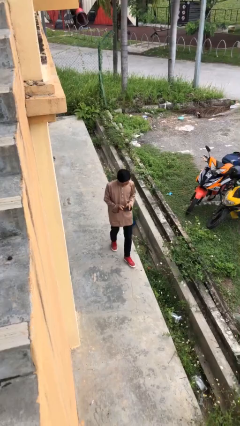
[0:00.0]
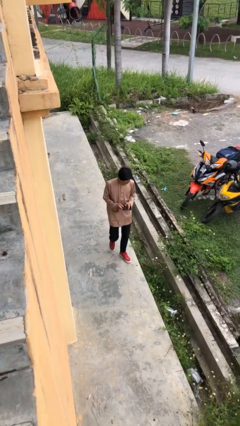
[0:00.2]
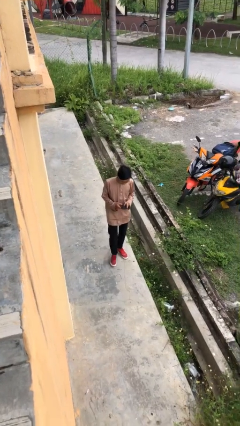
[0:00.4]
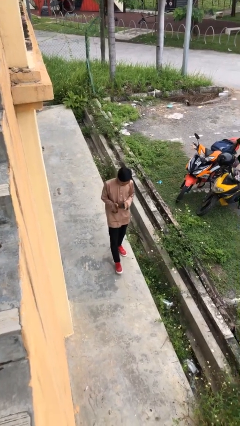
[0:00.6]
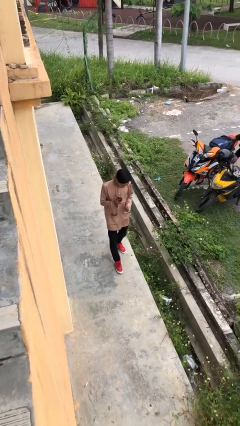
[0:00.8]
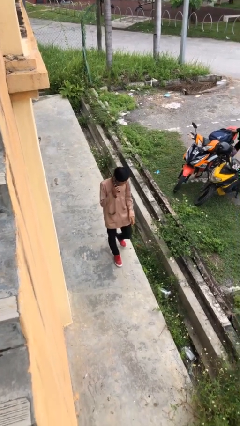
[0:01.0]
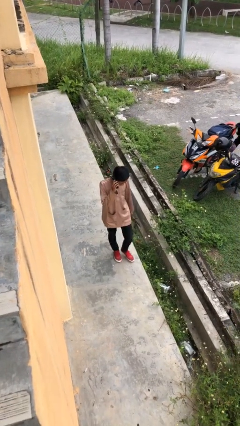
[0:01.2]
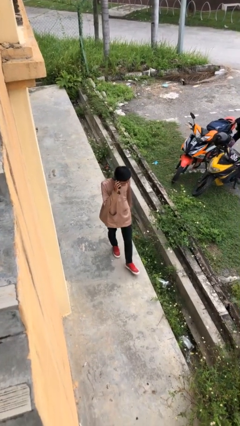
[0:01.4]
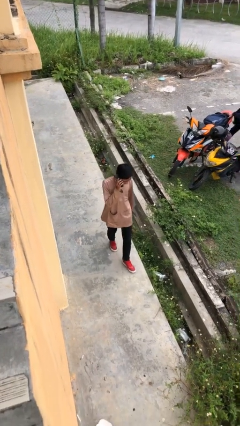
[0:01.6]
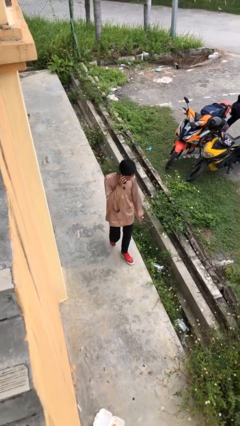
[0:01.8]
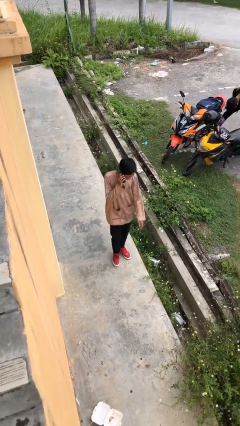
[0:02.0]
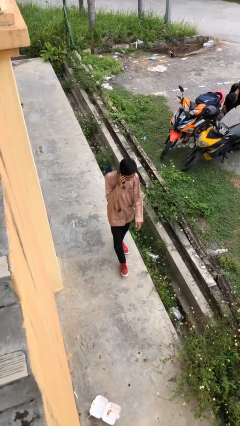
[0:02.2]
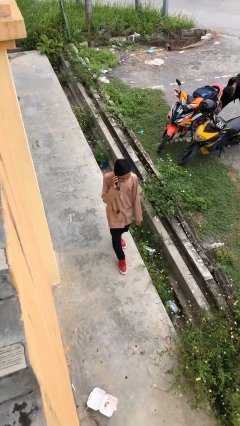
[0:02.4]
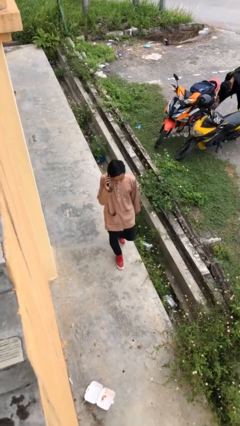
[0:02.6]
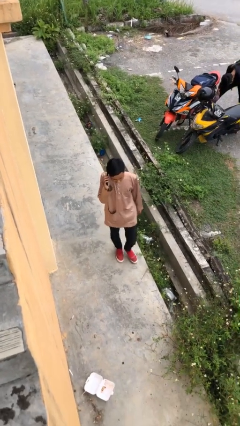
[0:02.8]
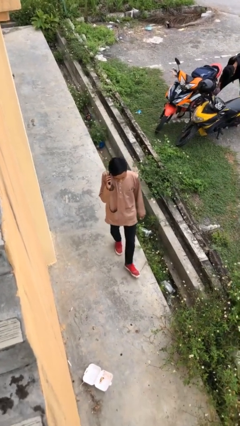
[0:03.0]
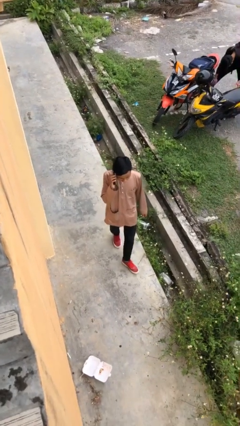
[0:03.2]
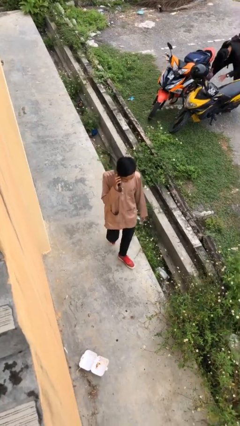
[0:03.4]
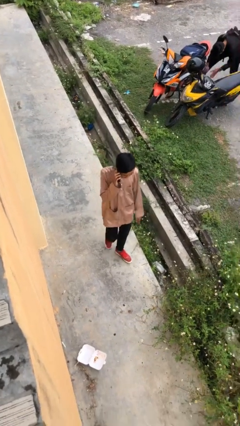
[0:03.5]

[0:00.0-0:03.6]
person talks on phone

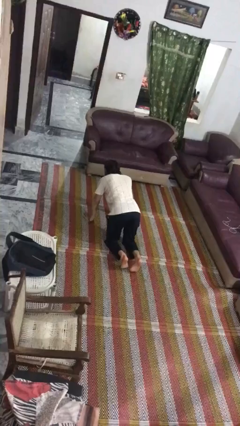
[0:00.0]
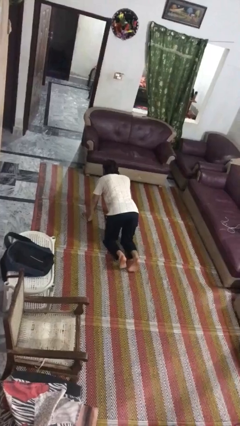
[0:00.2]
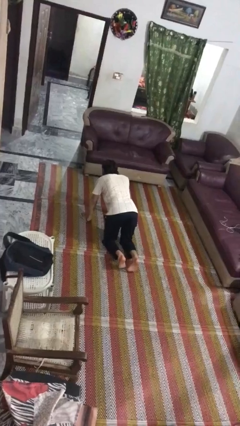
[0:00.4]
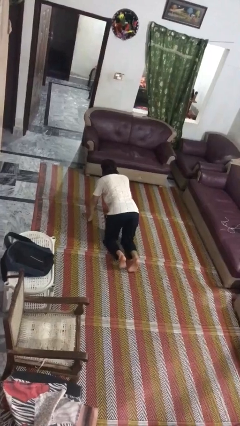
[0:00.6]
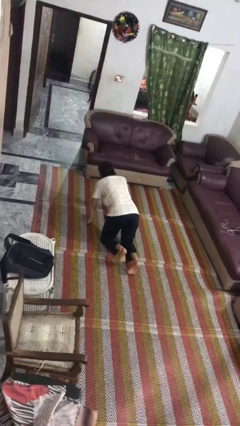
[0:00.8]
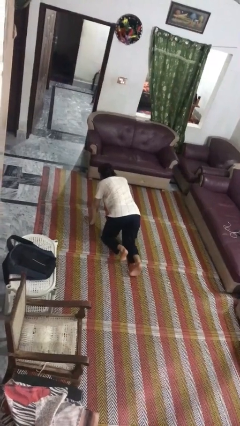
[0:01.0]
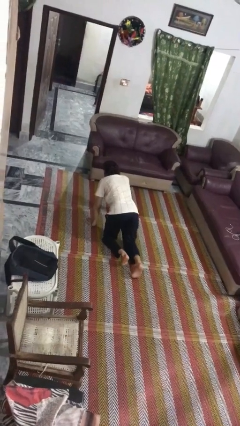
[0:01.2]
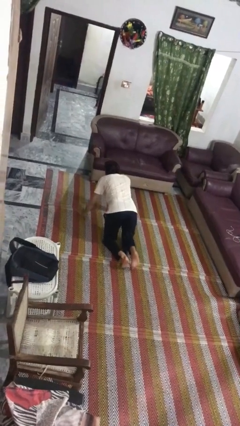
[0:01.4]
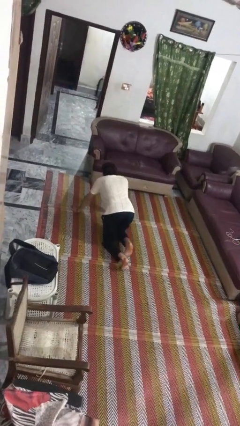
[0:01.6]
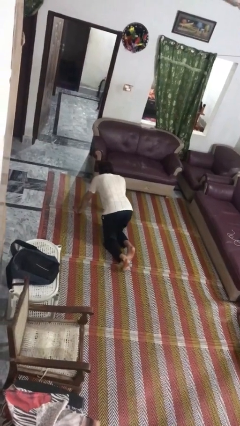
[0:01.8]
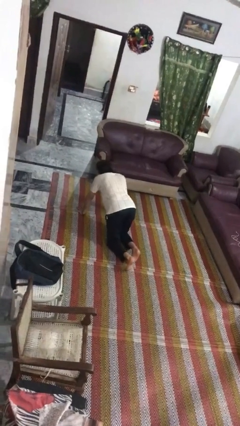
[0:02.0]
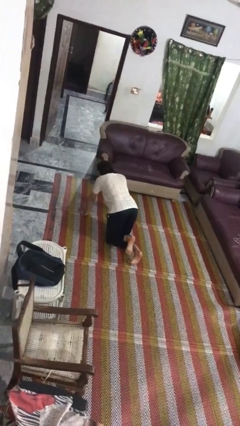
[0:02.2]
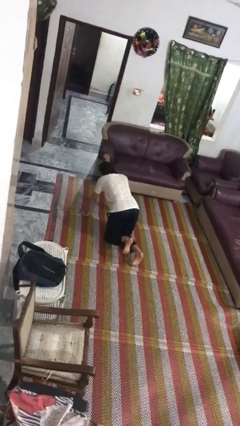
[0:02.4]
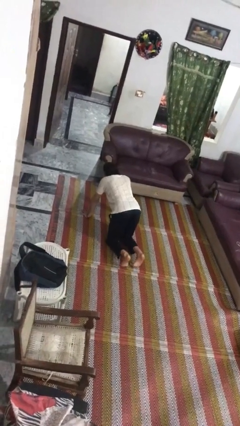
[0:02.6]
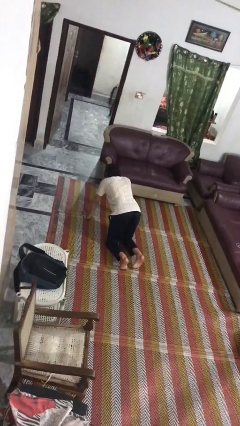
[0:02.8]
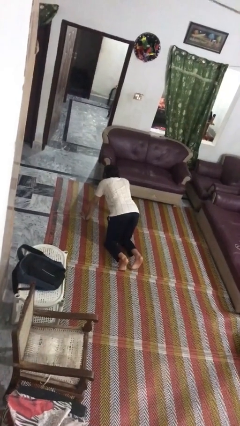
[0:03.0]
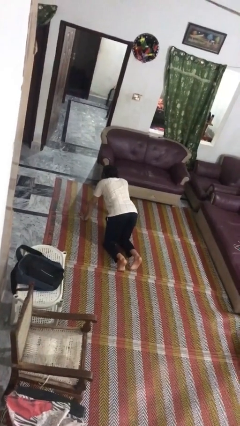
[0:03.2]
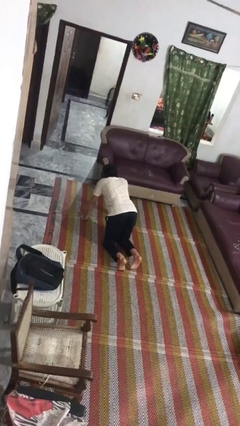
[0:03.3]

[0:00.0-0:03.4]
person crawls

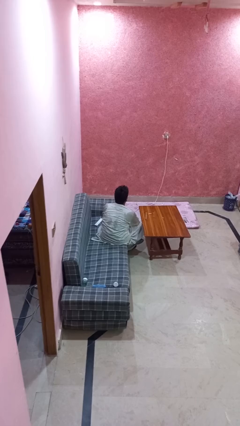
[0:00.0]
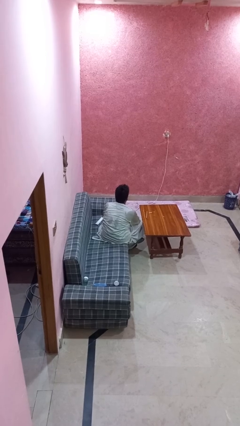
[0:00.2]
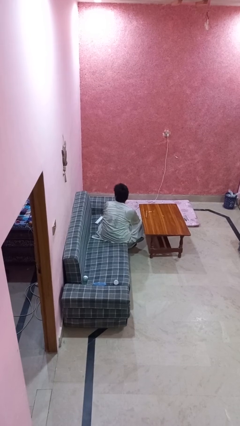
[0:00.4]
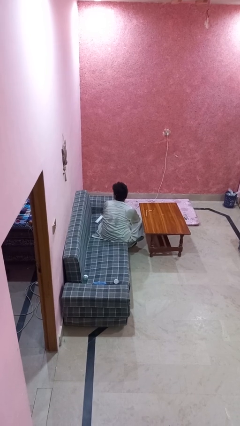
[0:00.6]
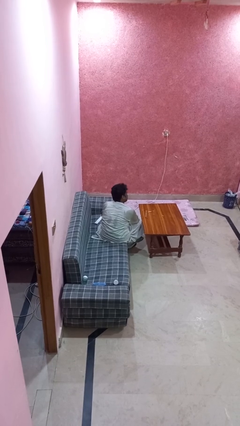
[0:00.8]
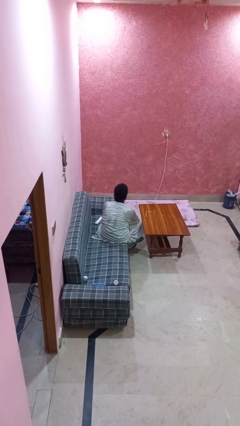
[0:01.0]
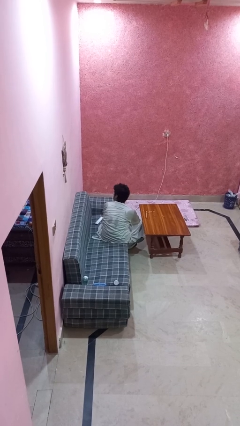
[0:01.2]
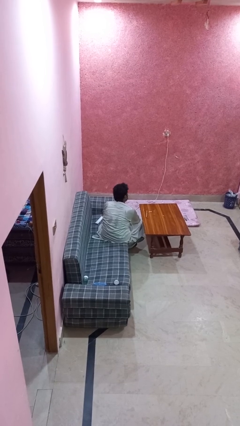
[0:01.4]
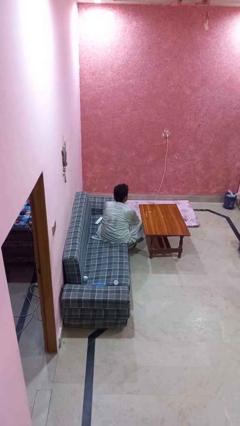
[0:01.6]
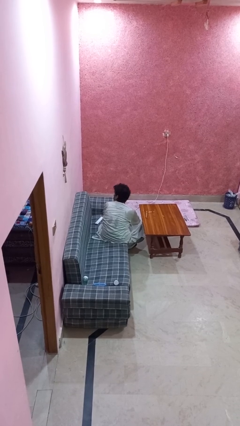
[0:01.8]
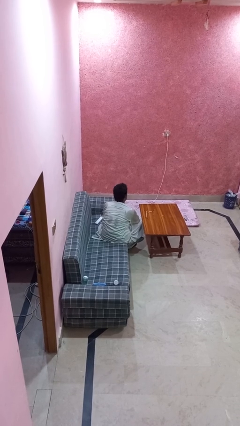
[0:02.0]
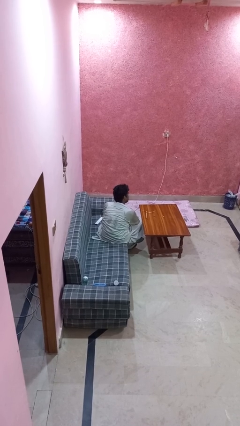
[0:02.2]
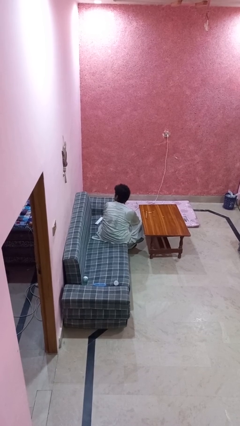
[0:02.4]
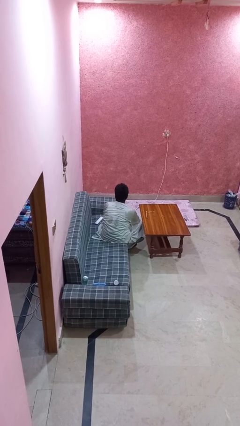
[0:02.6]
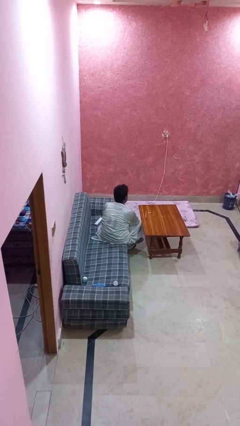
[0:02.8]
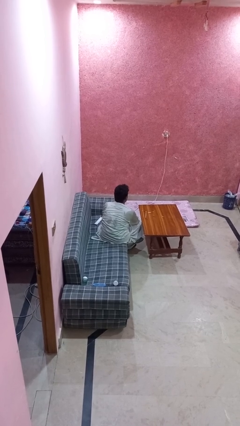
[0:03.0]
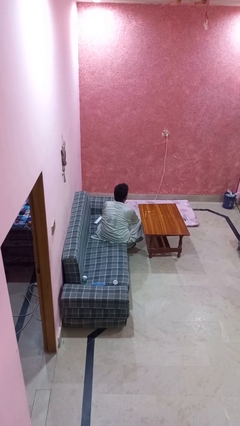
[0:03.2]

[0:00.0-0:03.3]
person shakes head

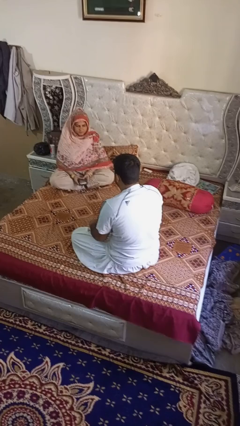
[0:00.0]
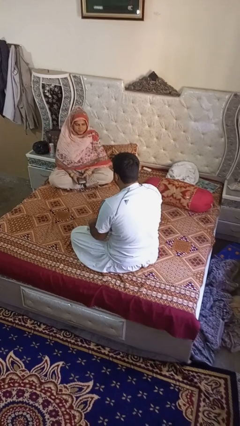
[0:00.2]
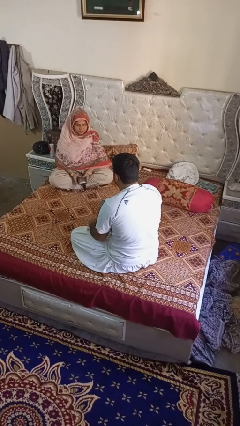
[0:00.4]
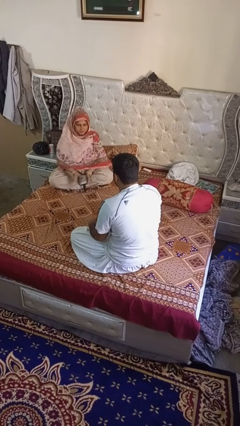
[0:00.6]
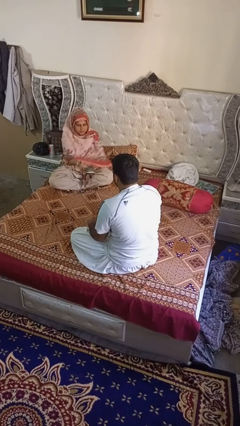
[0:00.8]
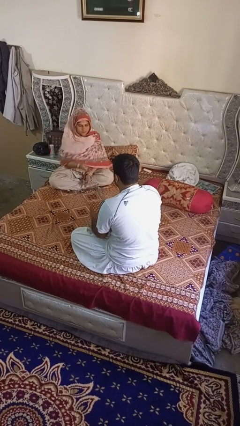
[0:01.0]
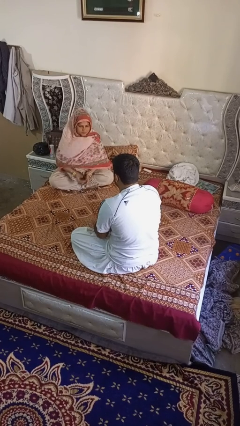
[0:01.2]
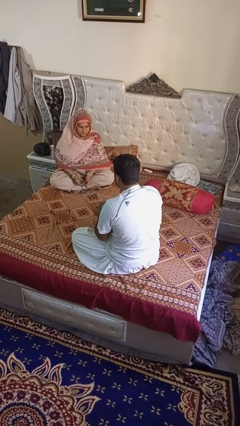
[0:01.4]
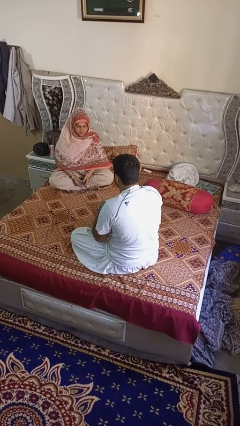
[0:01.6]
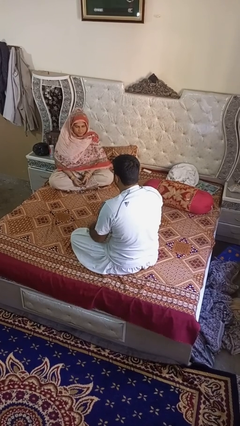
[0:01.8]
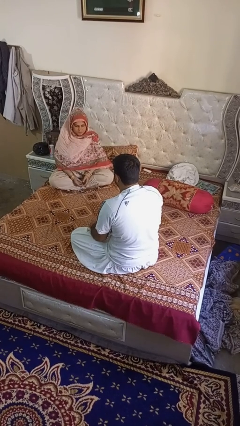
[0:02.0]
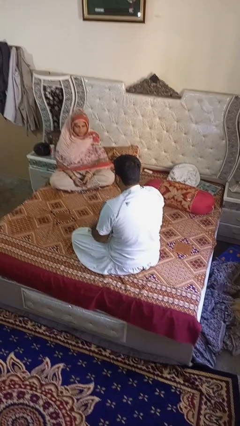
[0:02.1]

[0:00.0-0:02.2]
person catches object from person

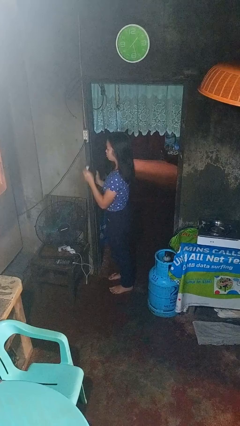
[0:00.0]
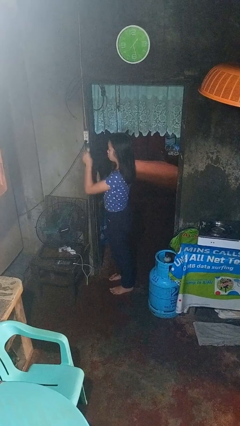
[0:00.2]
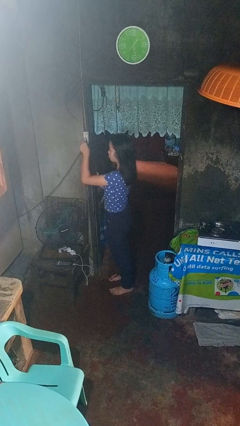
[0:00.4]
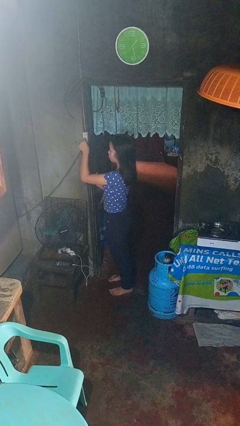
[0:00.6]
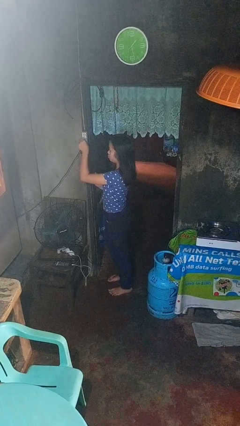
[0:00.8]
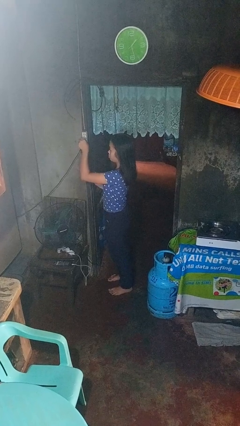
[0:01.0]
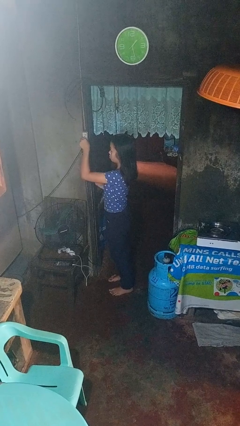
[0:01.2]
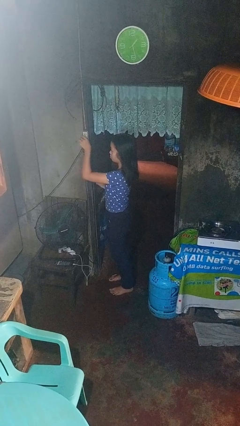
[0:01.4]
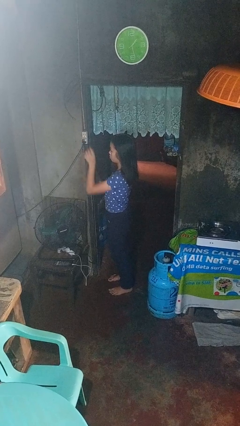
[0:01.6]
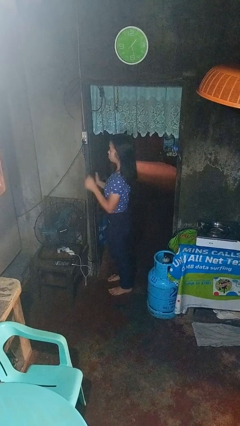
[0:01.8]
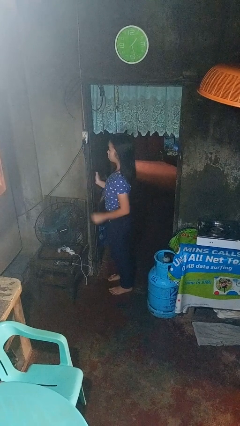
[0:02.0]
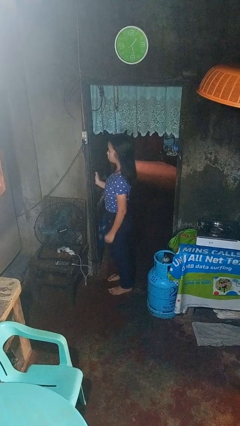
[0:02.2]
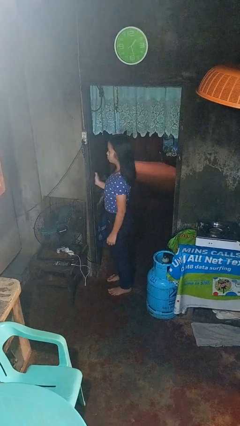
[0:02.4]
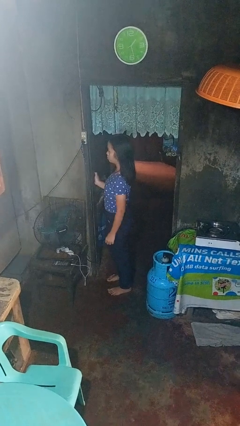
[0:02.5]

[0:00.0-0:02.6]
person plugs into electrical socket

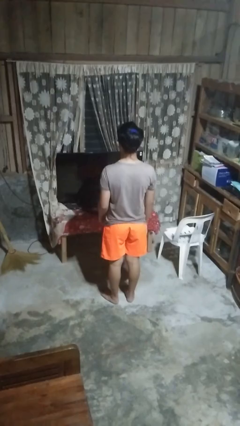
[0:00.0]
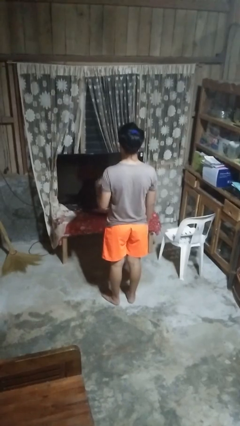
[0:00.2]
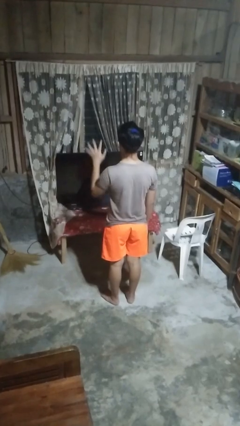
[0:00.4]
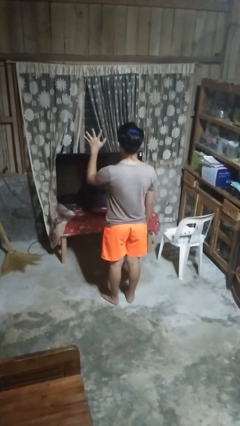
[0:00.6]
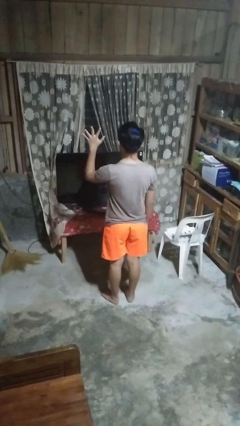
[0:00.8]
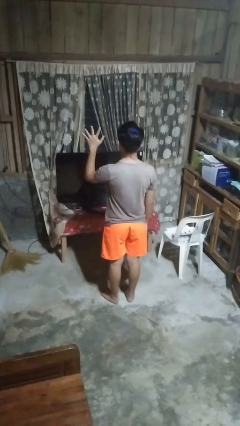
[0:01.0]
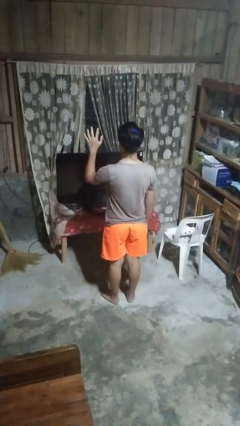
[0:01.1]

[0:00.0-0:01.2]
person gestures number five

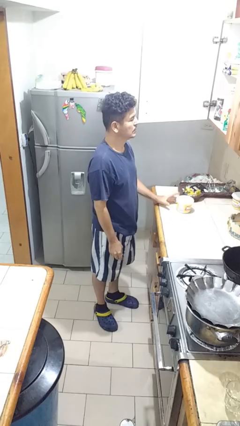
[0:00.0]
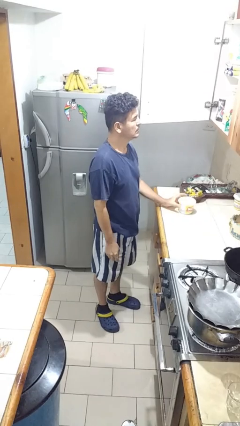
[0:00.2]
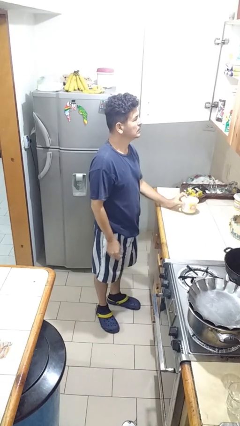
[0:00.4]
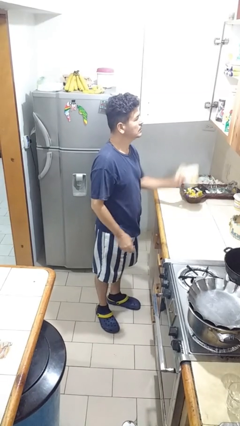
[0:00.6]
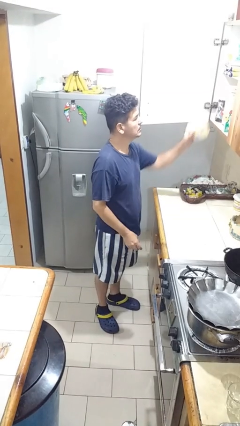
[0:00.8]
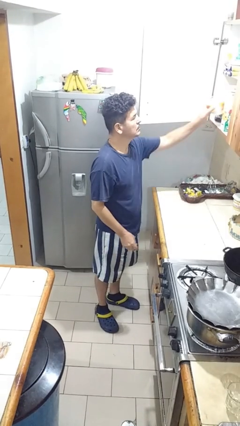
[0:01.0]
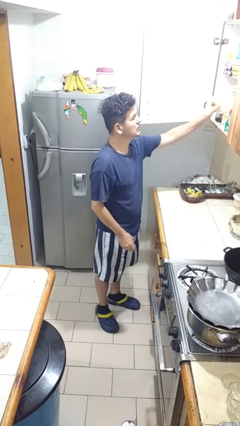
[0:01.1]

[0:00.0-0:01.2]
person puts object in cabinet
